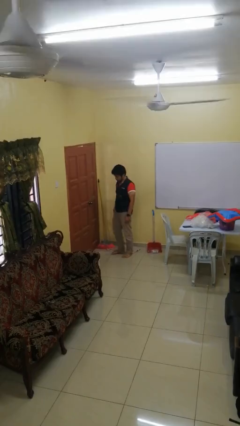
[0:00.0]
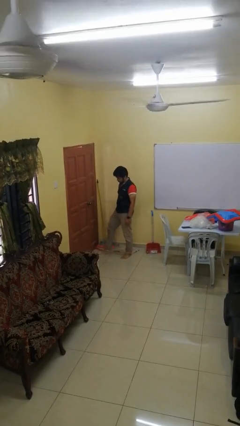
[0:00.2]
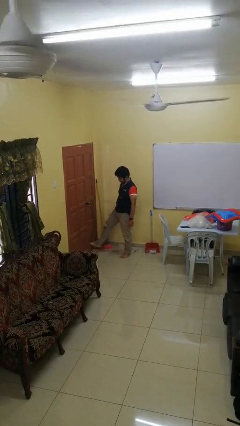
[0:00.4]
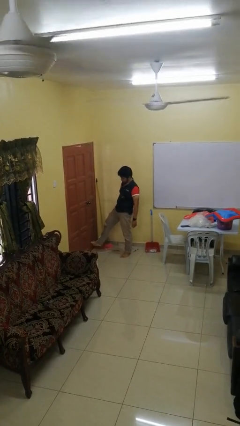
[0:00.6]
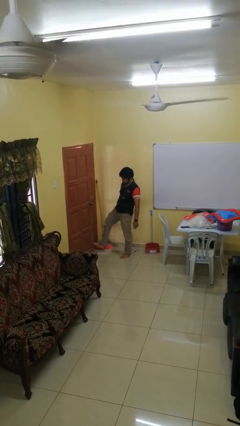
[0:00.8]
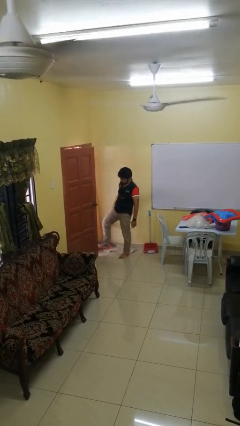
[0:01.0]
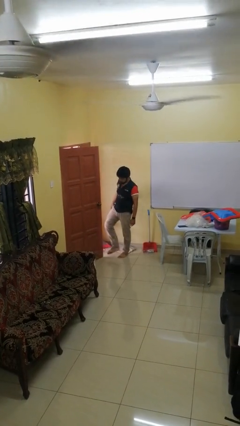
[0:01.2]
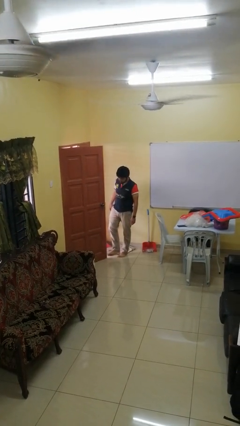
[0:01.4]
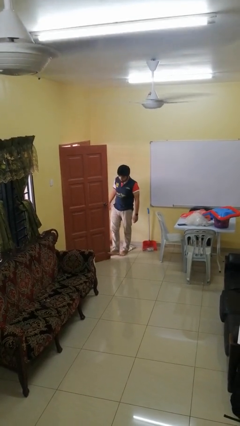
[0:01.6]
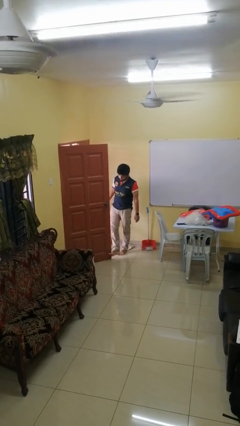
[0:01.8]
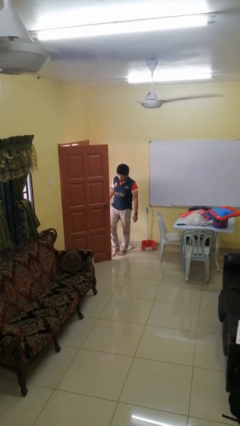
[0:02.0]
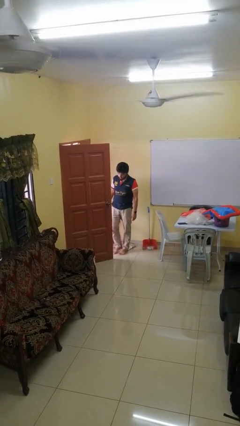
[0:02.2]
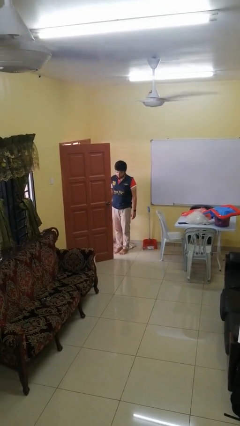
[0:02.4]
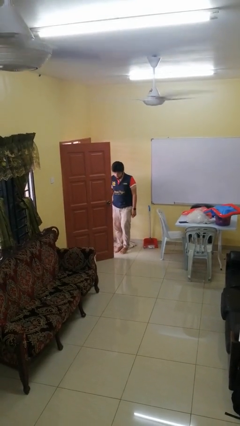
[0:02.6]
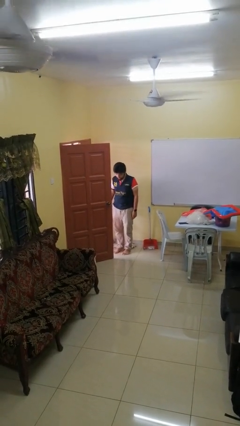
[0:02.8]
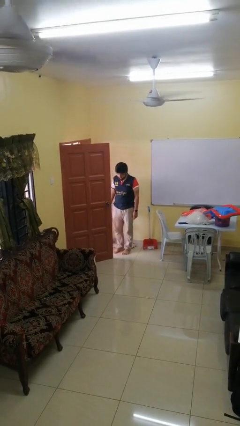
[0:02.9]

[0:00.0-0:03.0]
person opens facility door

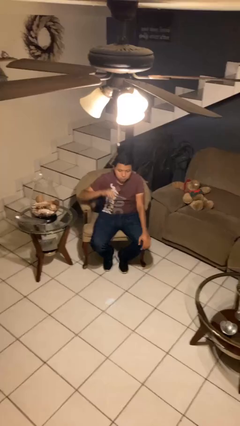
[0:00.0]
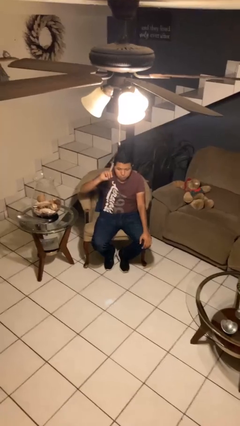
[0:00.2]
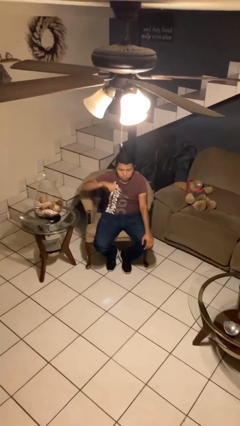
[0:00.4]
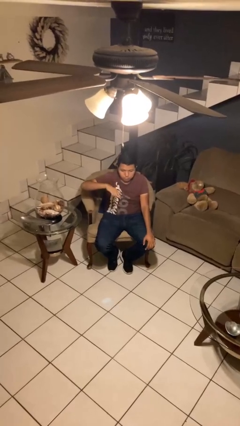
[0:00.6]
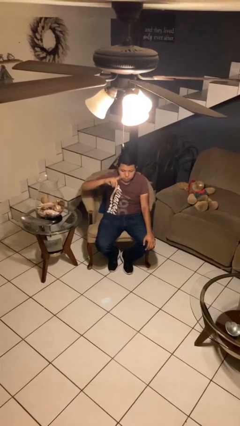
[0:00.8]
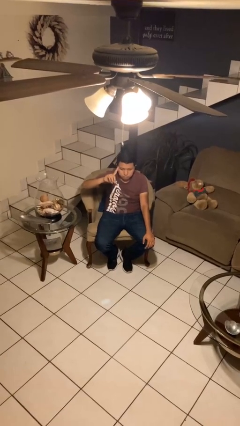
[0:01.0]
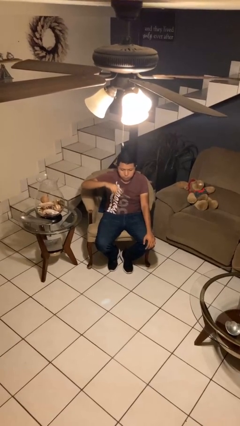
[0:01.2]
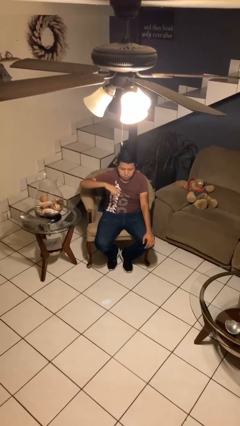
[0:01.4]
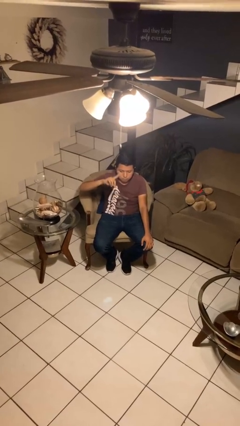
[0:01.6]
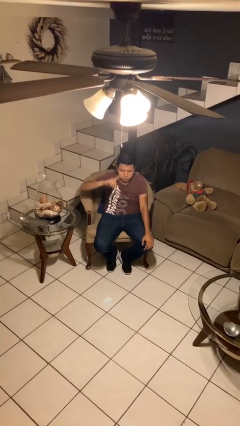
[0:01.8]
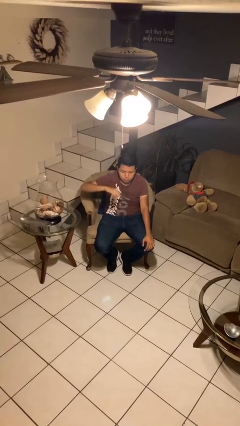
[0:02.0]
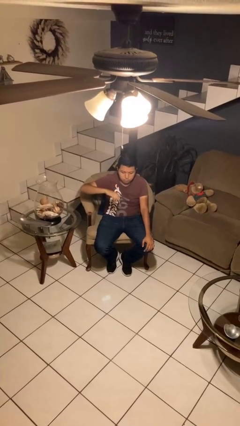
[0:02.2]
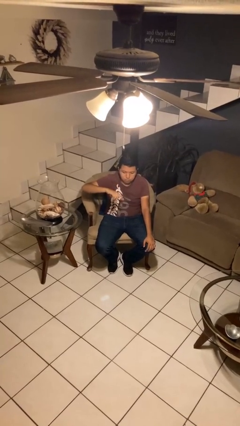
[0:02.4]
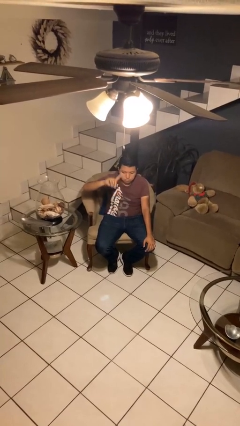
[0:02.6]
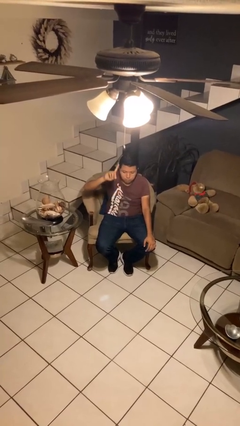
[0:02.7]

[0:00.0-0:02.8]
person gestures swipe up

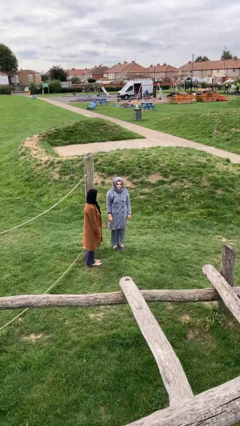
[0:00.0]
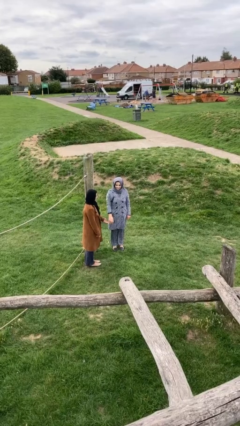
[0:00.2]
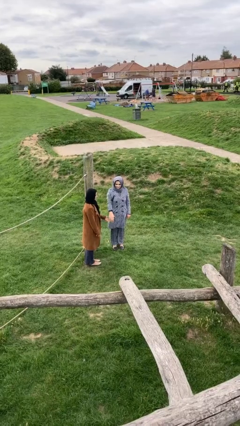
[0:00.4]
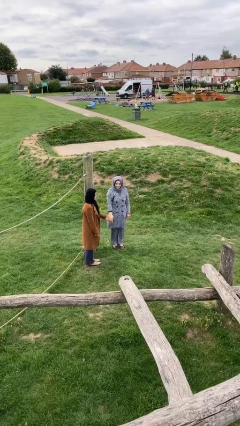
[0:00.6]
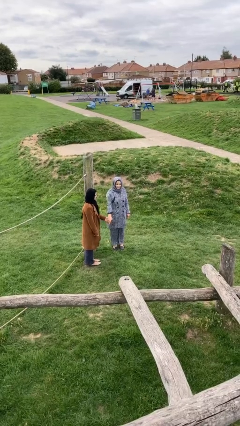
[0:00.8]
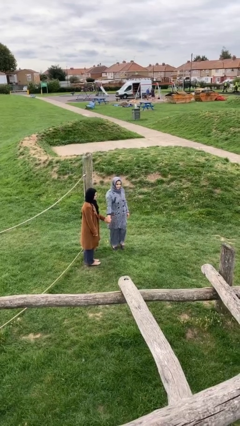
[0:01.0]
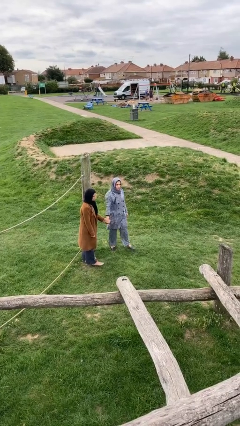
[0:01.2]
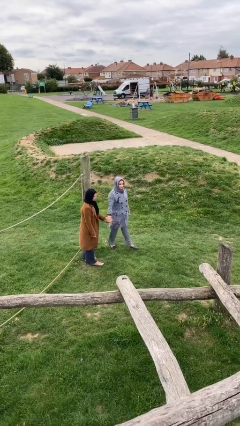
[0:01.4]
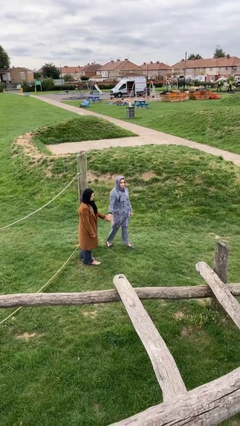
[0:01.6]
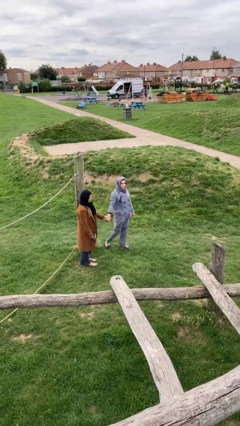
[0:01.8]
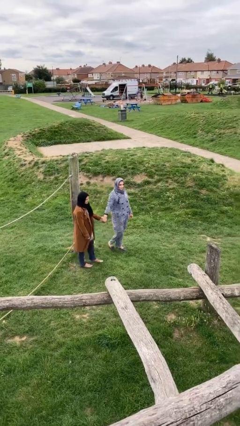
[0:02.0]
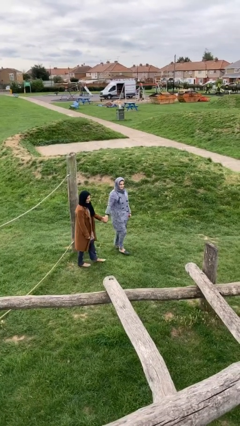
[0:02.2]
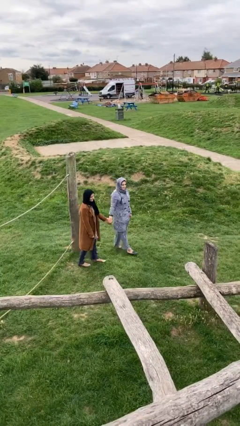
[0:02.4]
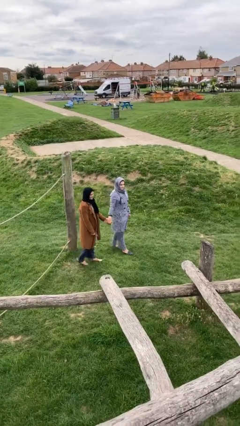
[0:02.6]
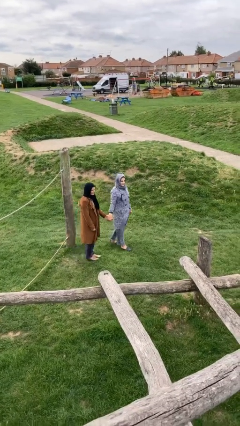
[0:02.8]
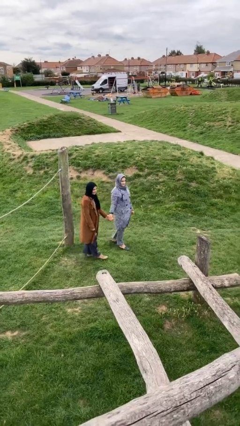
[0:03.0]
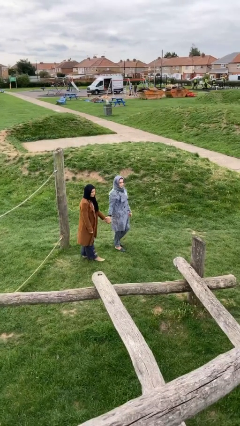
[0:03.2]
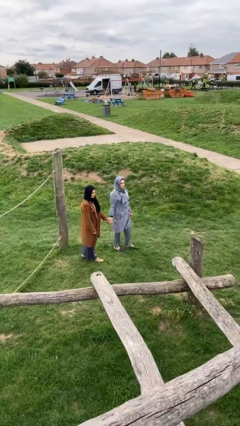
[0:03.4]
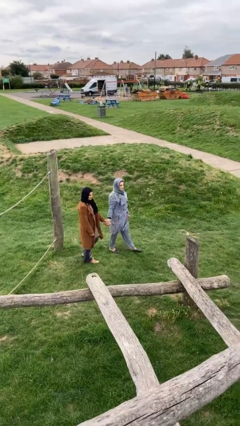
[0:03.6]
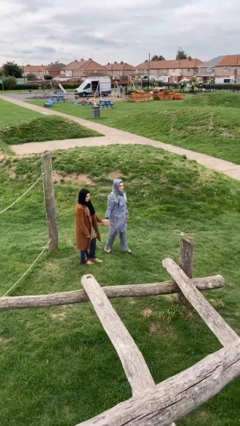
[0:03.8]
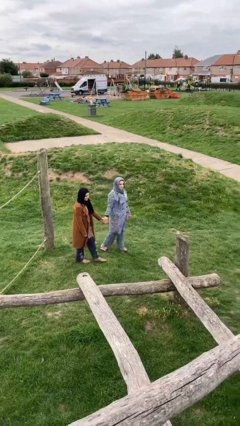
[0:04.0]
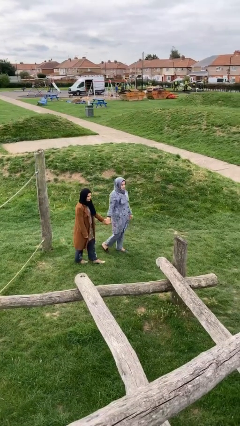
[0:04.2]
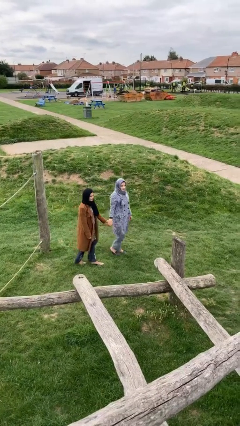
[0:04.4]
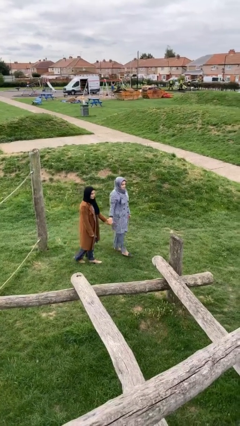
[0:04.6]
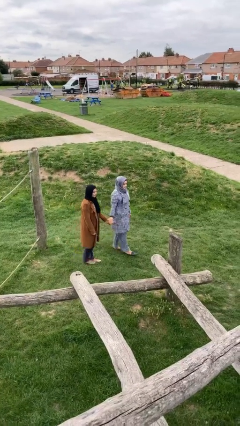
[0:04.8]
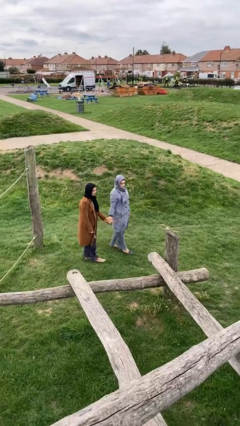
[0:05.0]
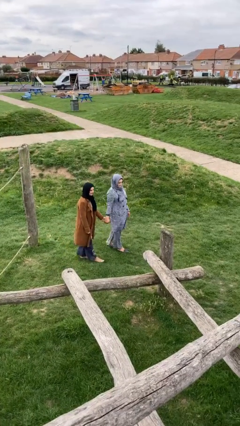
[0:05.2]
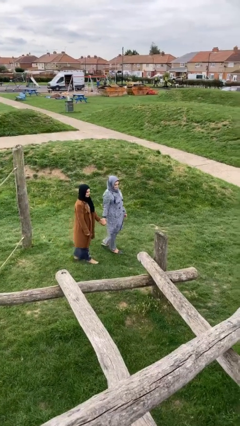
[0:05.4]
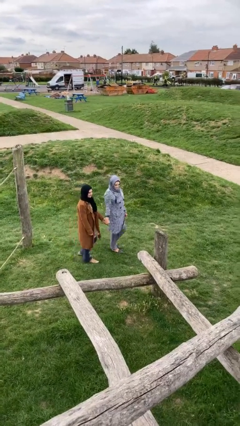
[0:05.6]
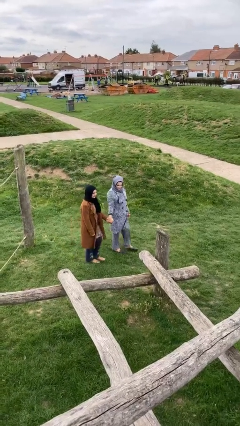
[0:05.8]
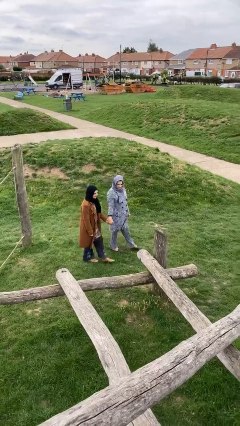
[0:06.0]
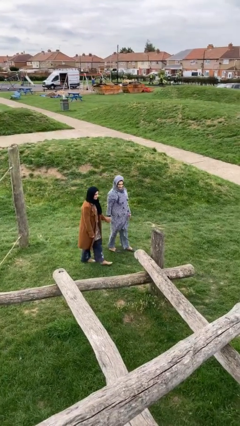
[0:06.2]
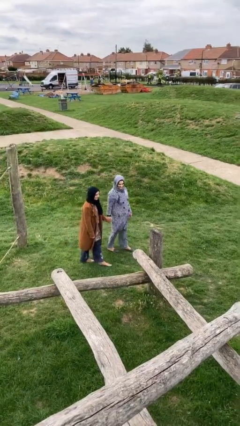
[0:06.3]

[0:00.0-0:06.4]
person holds hand

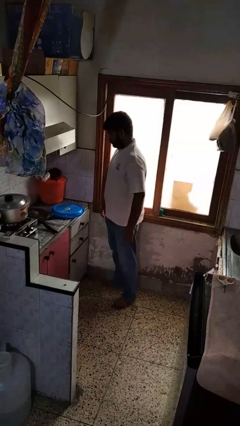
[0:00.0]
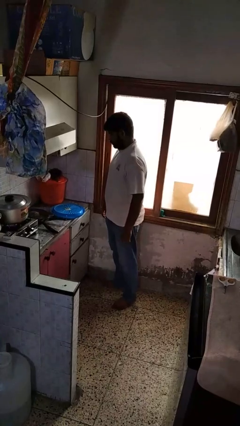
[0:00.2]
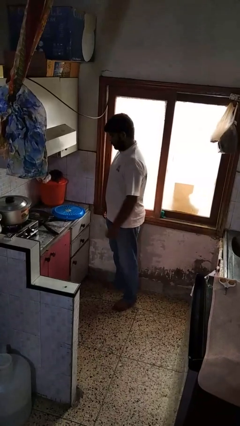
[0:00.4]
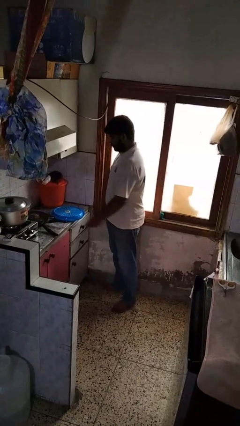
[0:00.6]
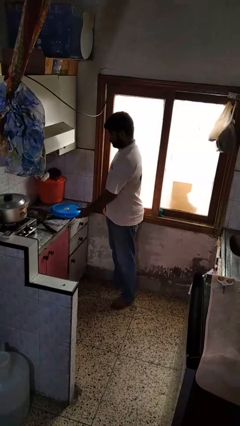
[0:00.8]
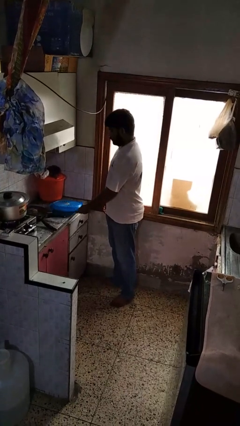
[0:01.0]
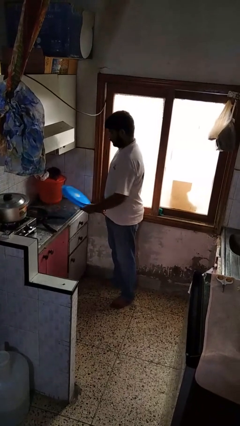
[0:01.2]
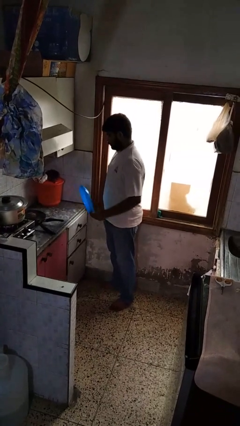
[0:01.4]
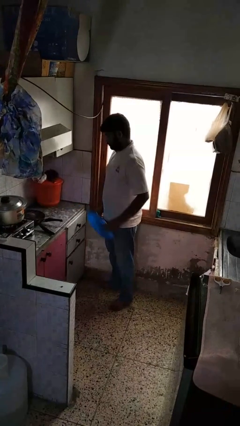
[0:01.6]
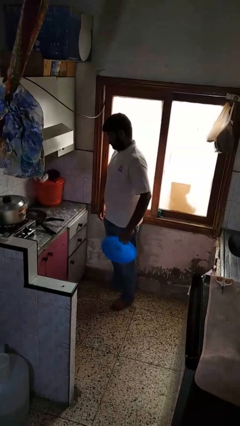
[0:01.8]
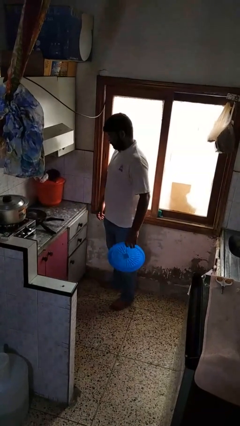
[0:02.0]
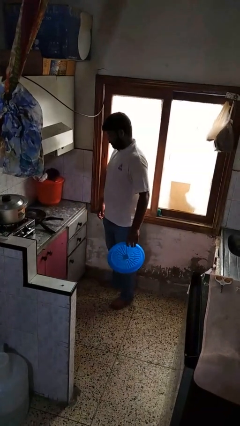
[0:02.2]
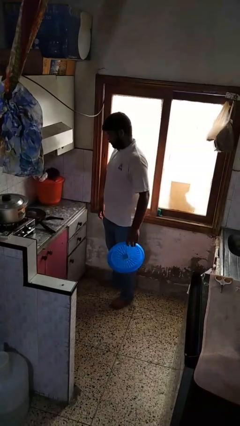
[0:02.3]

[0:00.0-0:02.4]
person picks up object from countertop

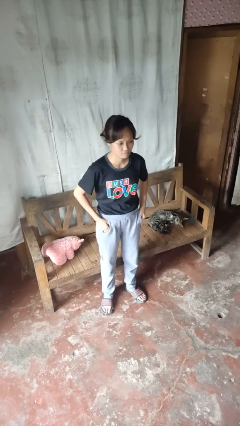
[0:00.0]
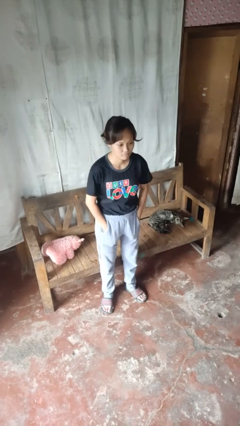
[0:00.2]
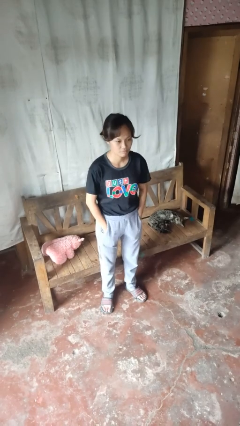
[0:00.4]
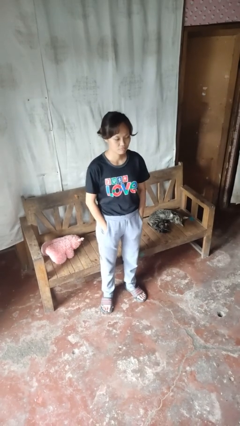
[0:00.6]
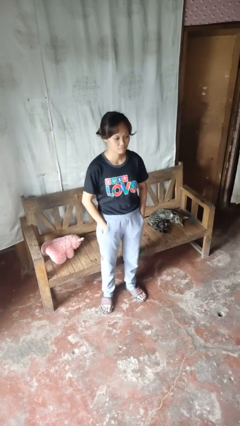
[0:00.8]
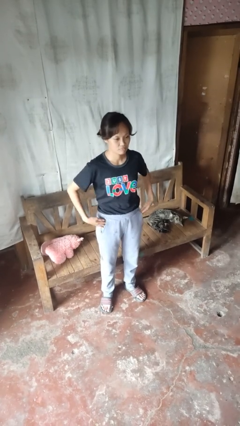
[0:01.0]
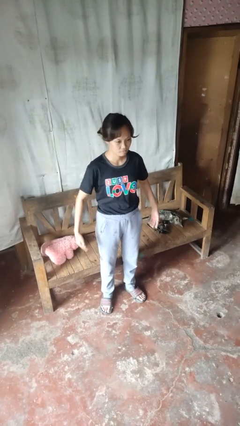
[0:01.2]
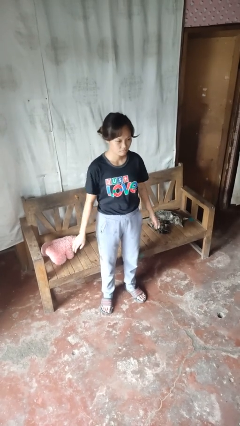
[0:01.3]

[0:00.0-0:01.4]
person puts hands in back pockets

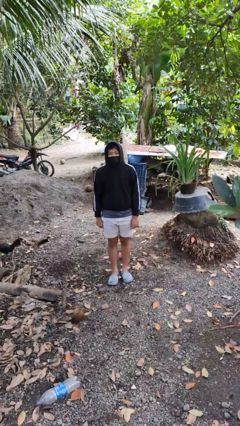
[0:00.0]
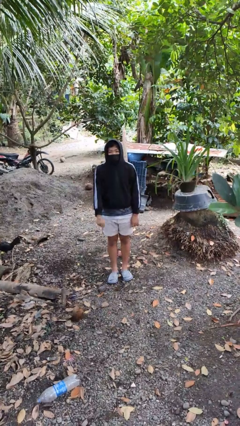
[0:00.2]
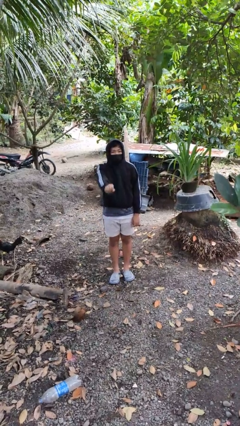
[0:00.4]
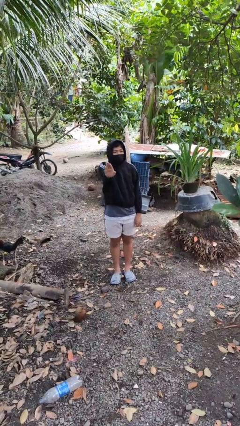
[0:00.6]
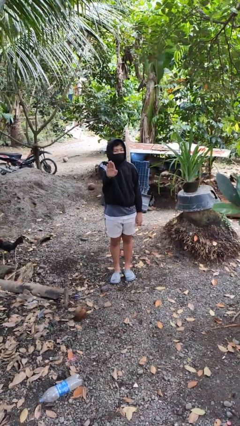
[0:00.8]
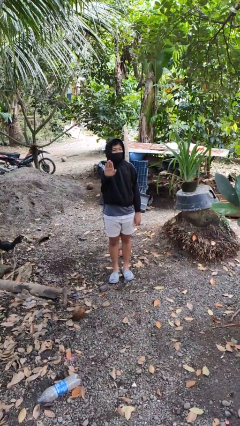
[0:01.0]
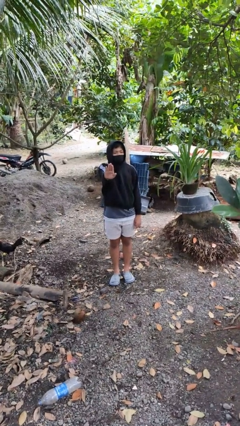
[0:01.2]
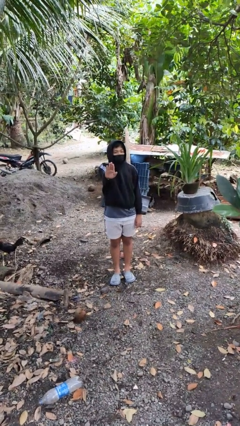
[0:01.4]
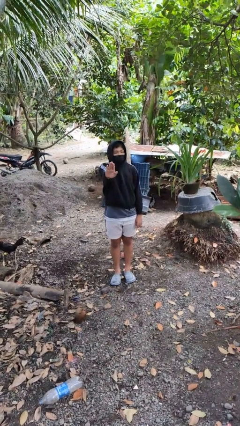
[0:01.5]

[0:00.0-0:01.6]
person gestures stop
